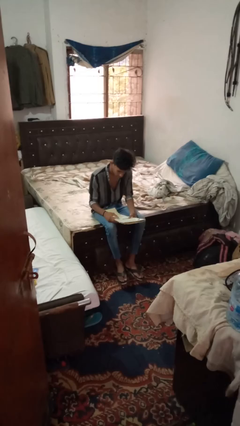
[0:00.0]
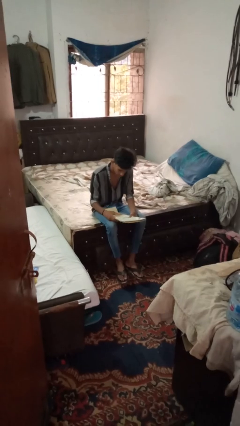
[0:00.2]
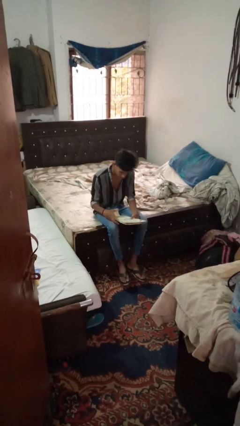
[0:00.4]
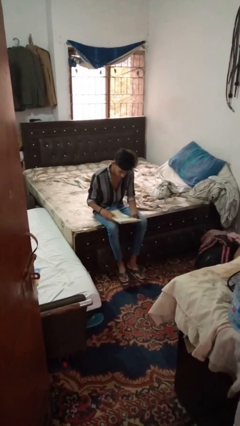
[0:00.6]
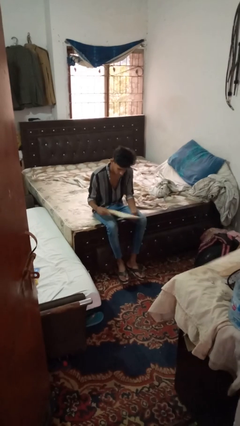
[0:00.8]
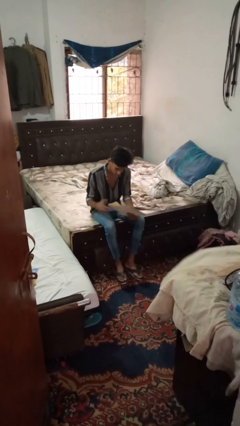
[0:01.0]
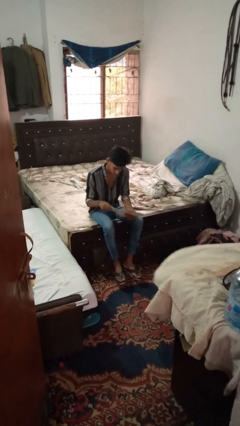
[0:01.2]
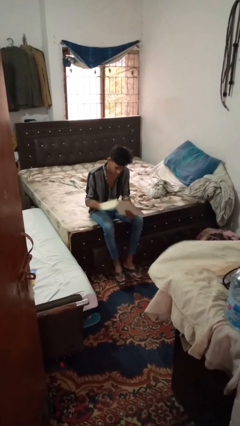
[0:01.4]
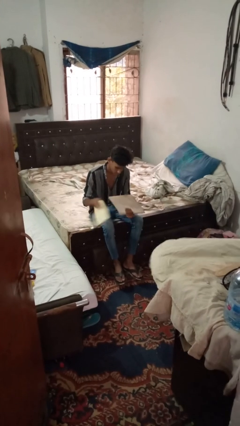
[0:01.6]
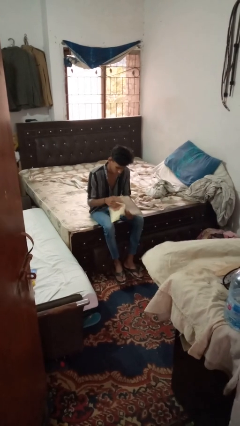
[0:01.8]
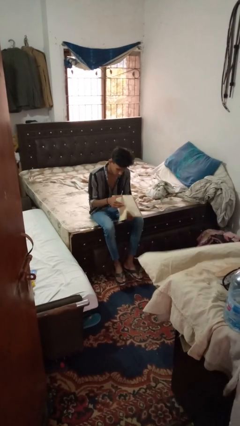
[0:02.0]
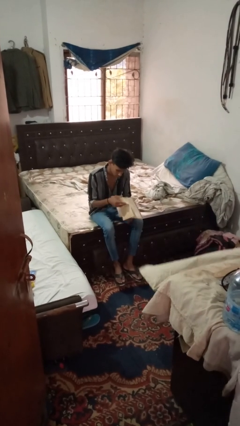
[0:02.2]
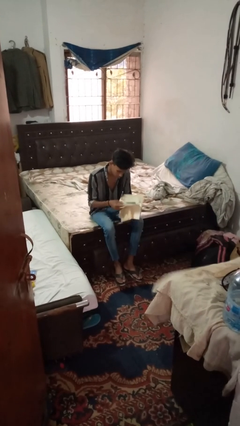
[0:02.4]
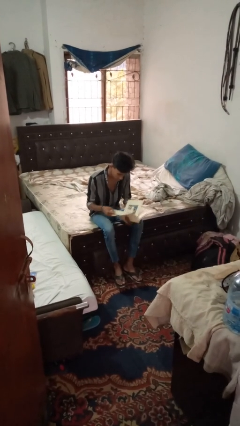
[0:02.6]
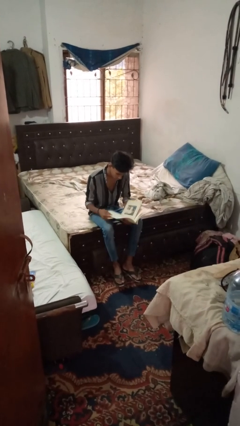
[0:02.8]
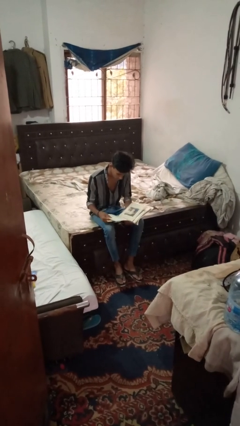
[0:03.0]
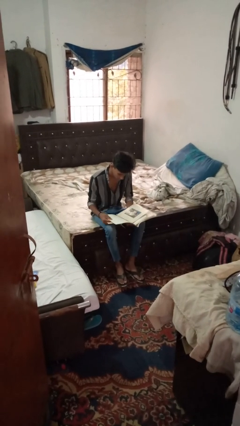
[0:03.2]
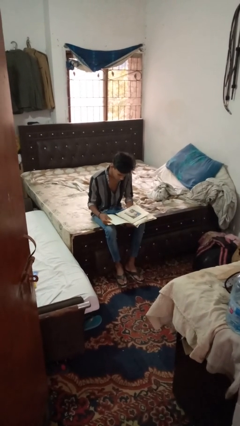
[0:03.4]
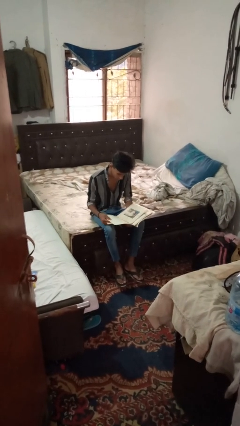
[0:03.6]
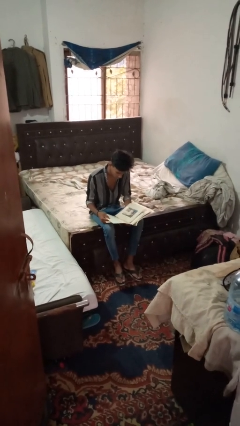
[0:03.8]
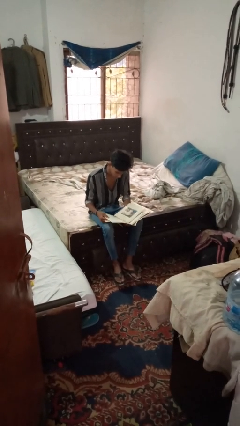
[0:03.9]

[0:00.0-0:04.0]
person reads magazine

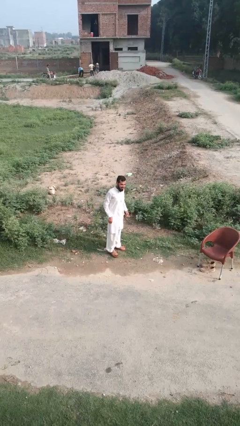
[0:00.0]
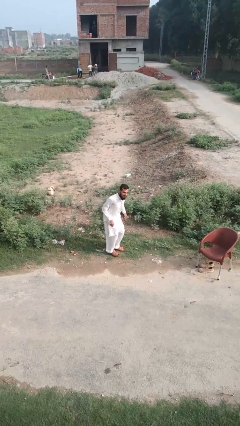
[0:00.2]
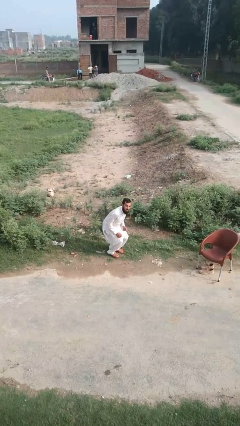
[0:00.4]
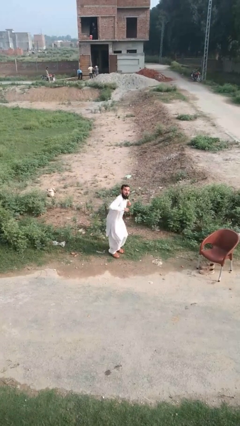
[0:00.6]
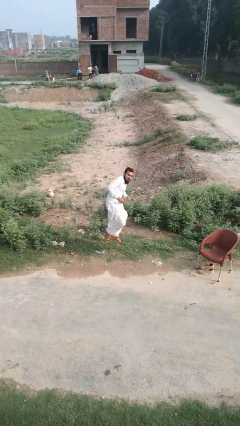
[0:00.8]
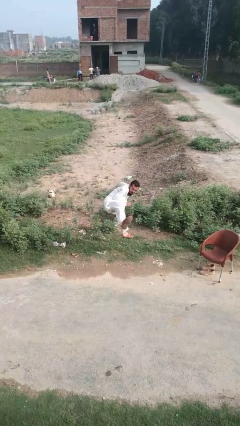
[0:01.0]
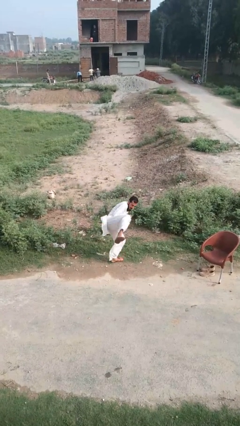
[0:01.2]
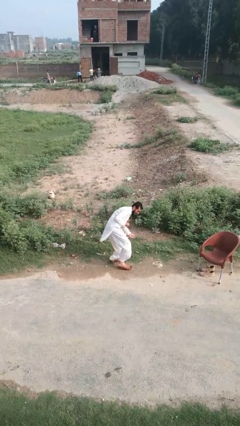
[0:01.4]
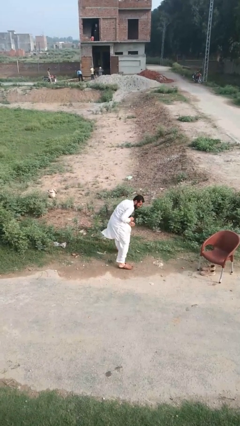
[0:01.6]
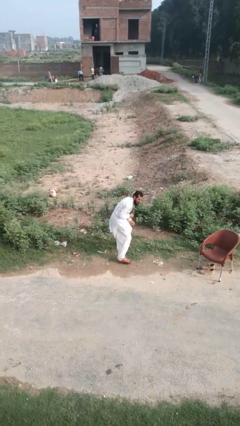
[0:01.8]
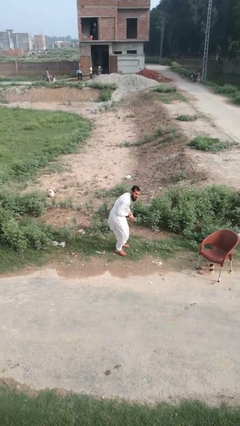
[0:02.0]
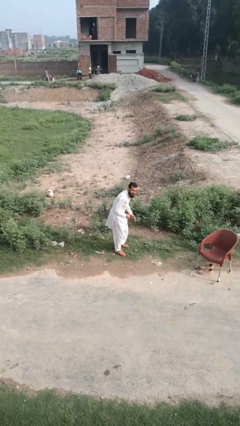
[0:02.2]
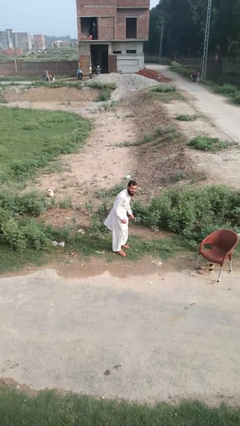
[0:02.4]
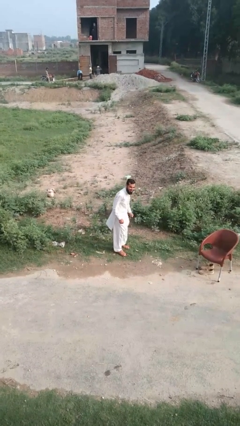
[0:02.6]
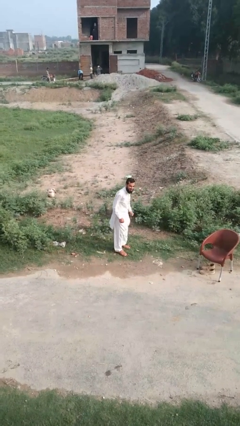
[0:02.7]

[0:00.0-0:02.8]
person jumps

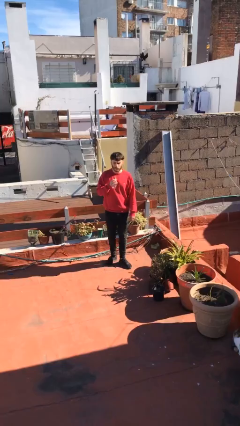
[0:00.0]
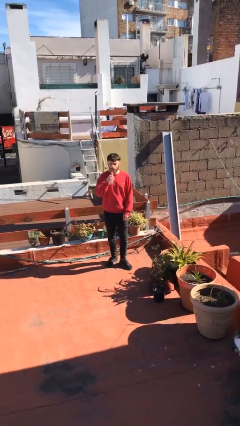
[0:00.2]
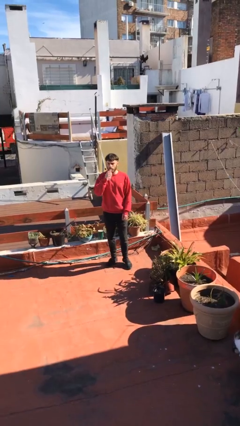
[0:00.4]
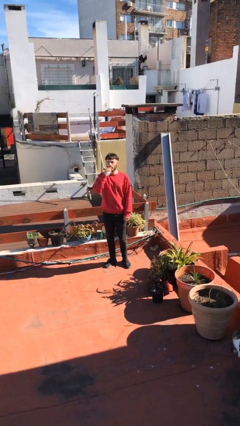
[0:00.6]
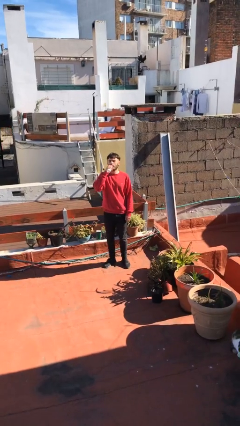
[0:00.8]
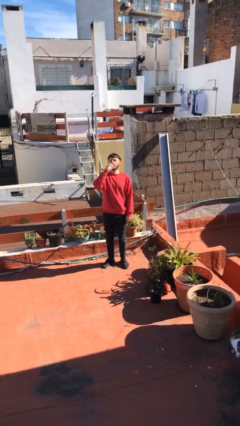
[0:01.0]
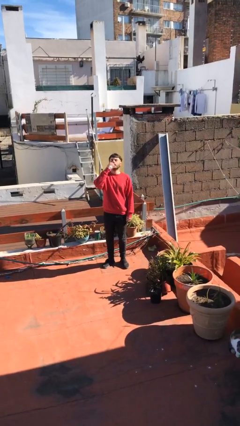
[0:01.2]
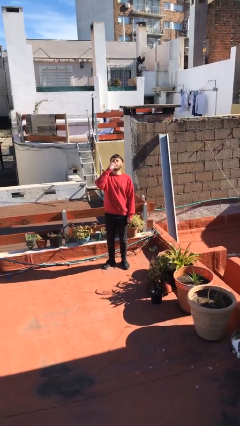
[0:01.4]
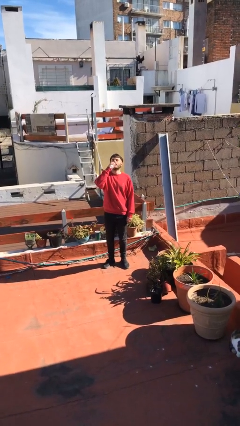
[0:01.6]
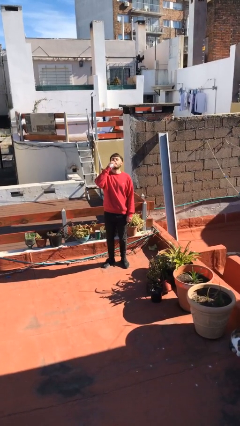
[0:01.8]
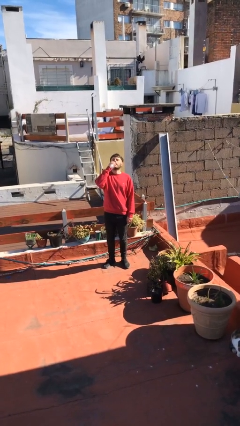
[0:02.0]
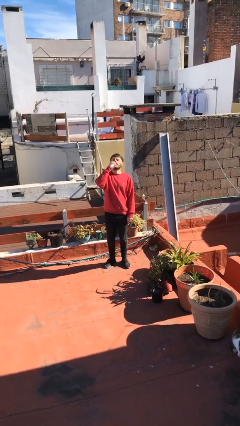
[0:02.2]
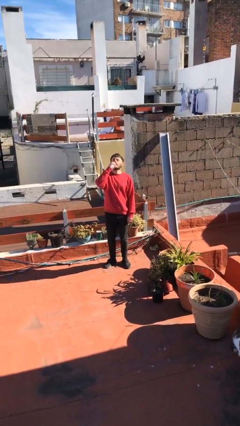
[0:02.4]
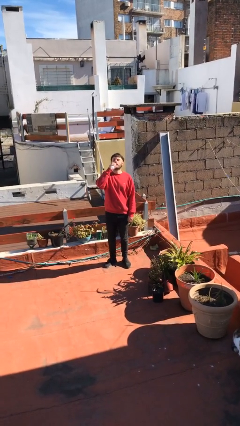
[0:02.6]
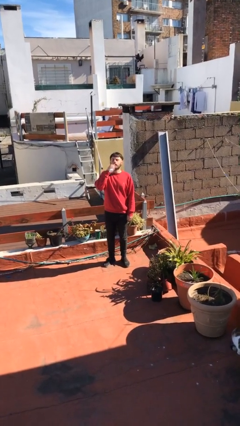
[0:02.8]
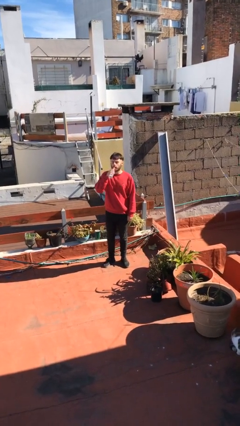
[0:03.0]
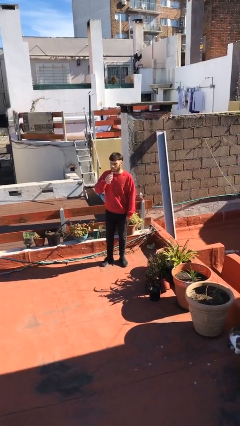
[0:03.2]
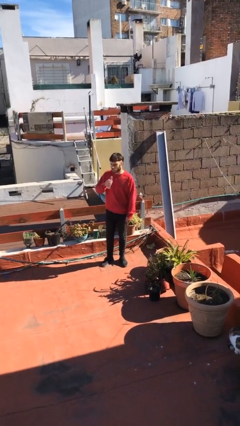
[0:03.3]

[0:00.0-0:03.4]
person drinks from bottle

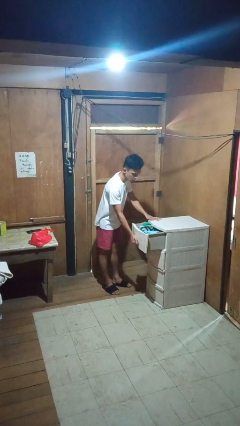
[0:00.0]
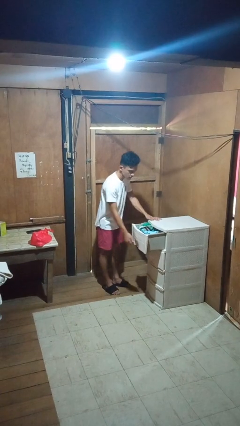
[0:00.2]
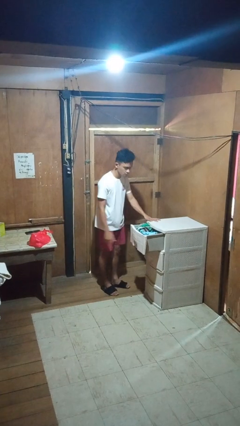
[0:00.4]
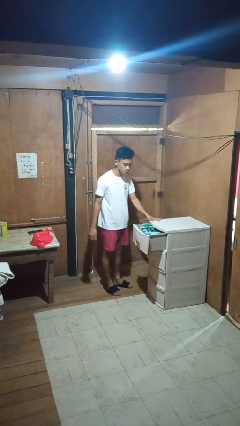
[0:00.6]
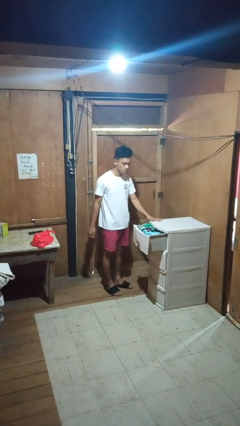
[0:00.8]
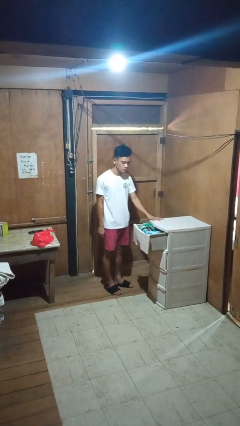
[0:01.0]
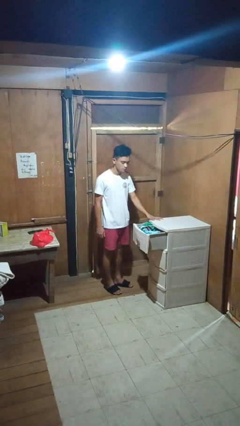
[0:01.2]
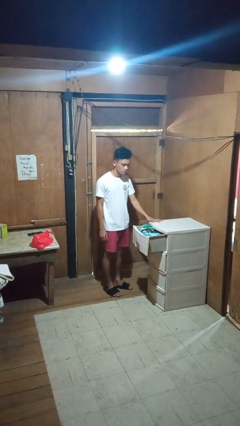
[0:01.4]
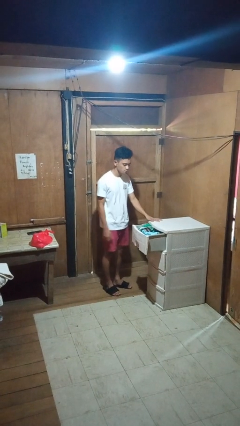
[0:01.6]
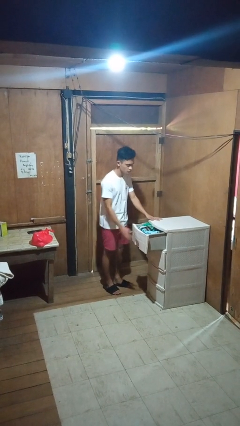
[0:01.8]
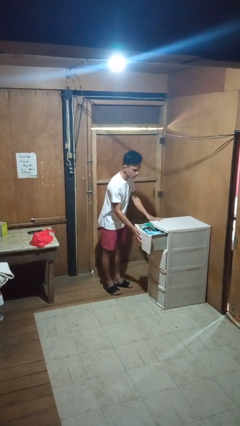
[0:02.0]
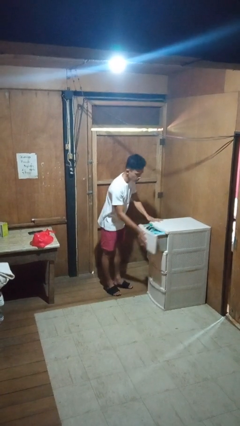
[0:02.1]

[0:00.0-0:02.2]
person opens dresser drawer

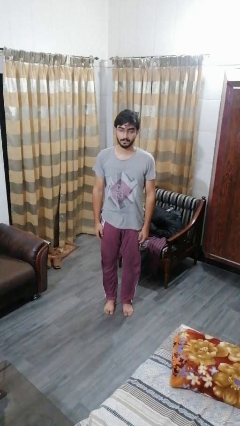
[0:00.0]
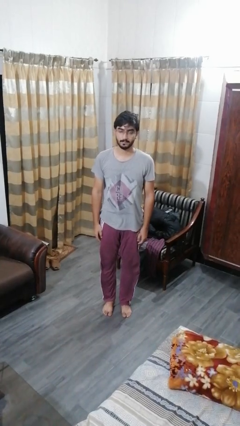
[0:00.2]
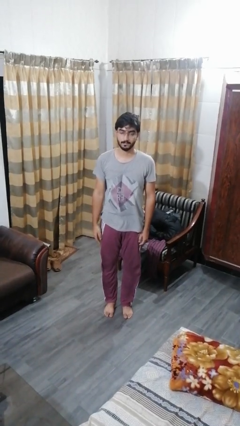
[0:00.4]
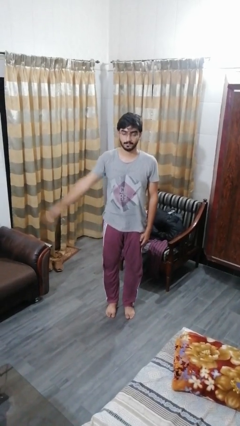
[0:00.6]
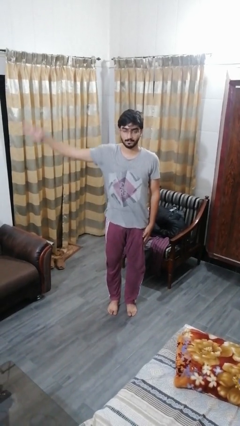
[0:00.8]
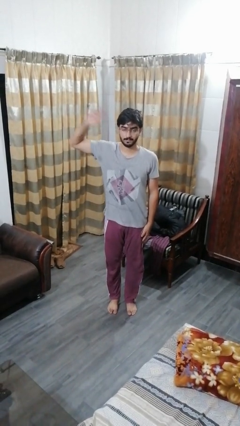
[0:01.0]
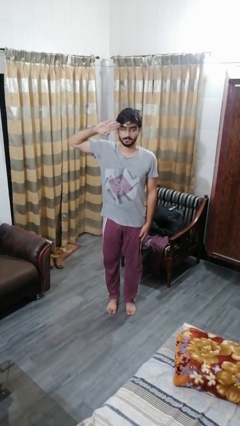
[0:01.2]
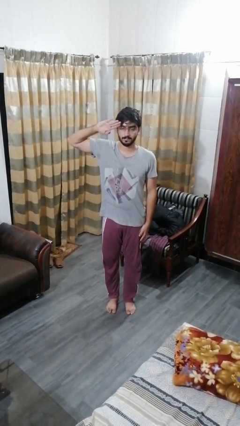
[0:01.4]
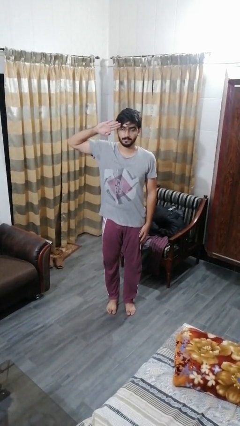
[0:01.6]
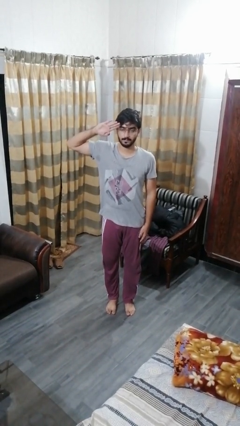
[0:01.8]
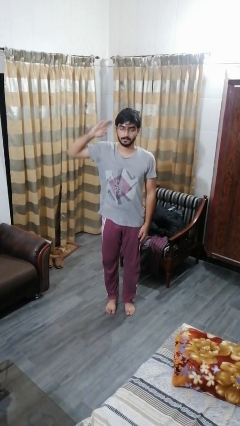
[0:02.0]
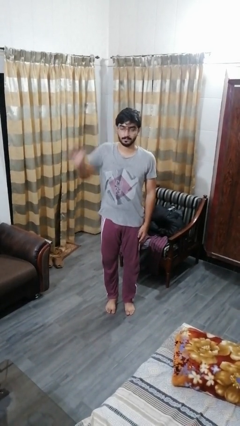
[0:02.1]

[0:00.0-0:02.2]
person salutes

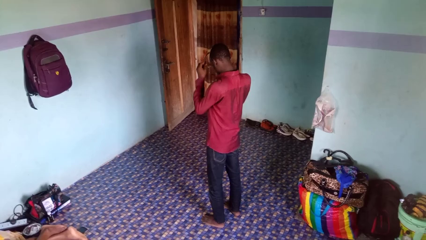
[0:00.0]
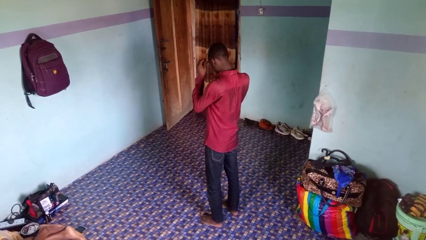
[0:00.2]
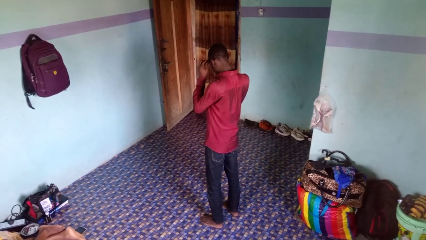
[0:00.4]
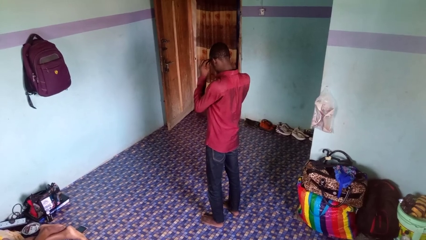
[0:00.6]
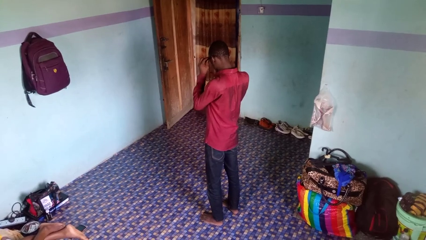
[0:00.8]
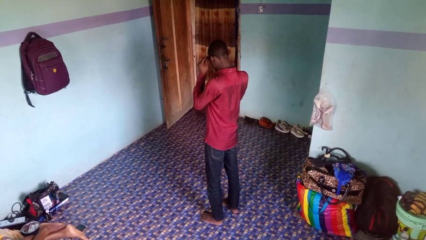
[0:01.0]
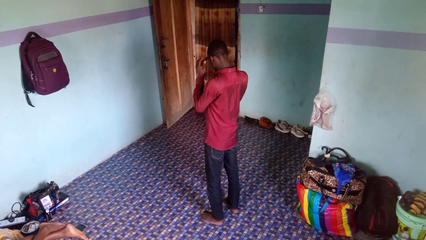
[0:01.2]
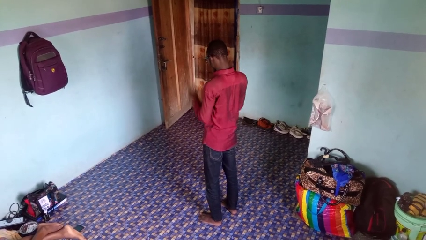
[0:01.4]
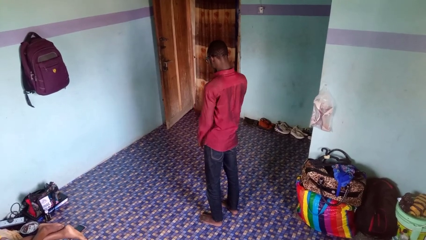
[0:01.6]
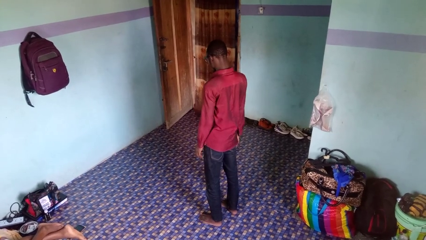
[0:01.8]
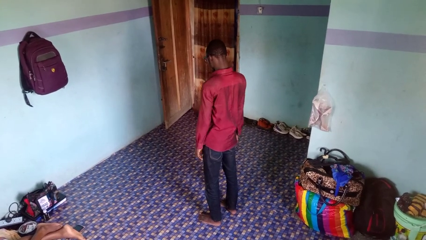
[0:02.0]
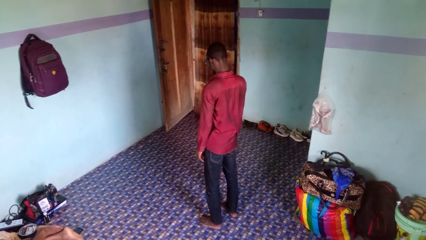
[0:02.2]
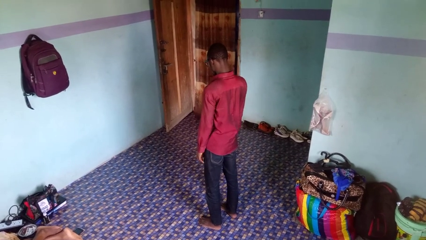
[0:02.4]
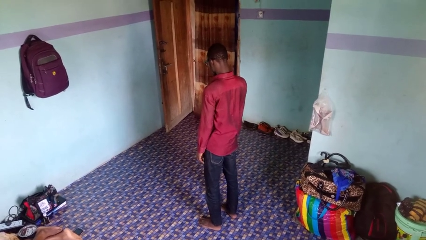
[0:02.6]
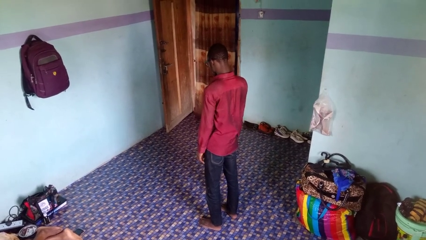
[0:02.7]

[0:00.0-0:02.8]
person puts on glasses
